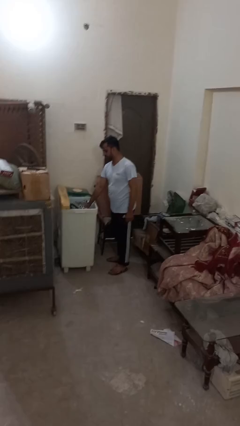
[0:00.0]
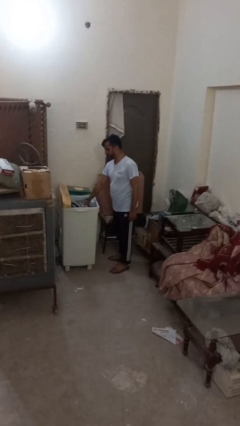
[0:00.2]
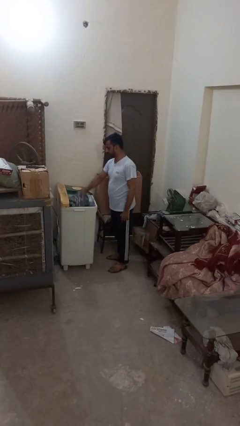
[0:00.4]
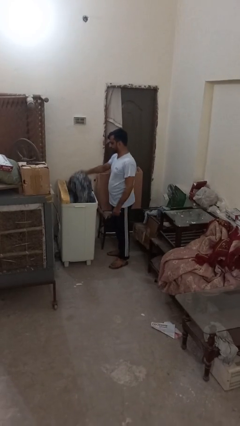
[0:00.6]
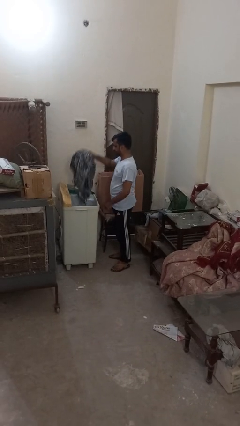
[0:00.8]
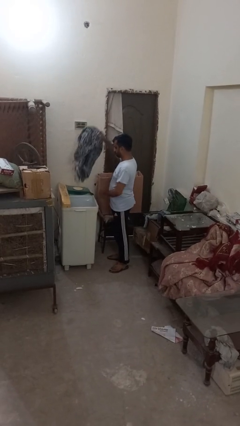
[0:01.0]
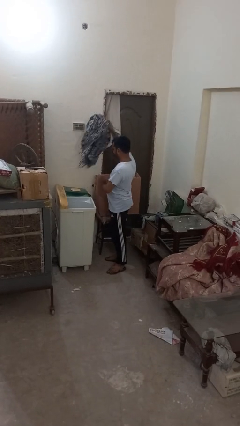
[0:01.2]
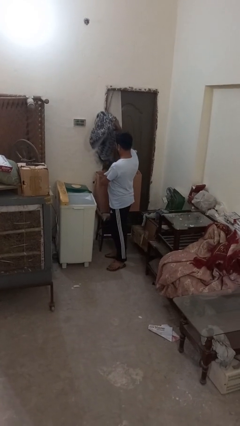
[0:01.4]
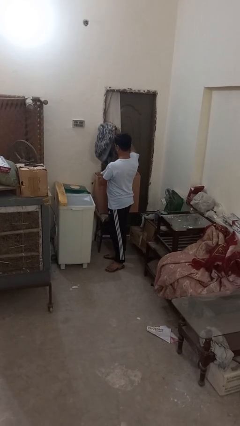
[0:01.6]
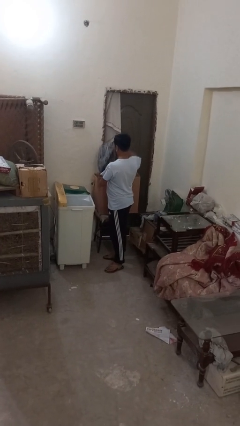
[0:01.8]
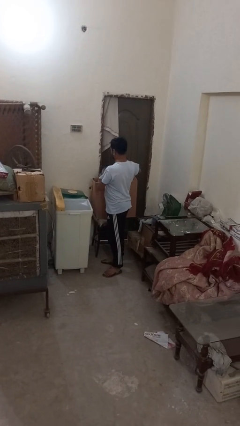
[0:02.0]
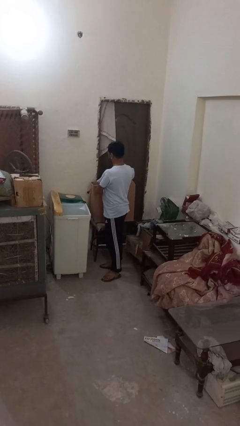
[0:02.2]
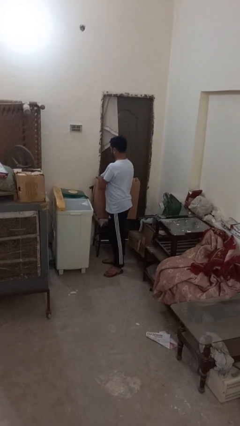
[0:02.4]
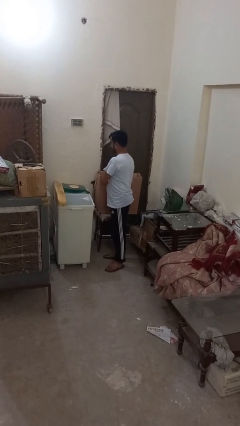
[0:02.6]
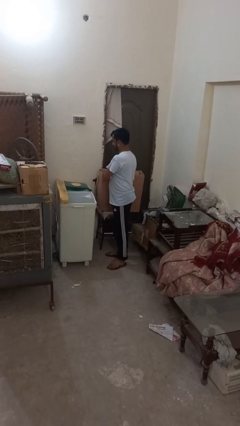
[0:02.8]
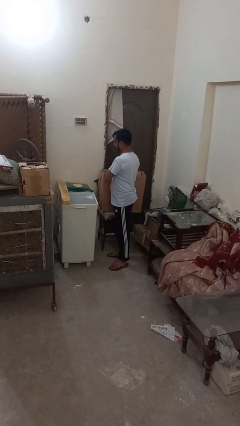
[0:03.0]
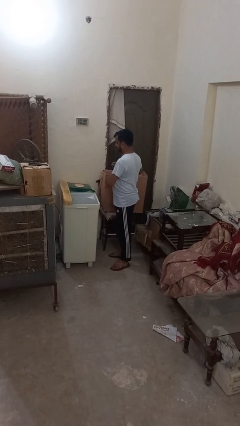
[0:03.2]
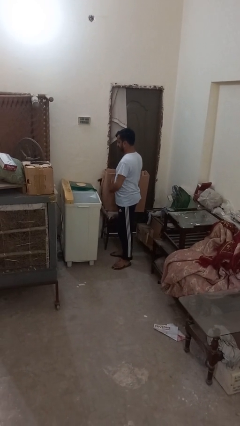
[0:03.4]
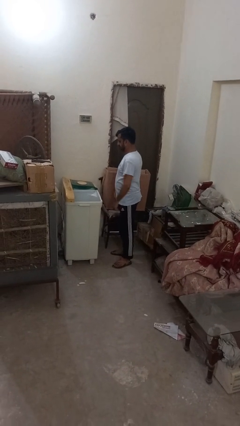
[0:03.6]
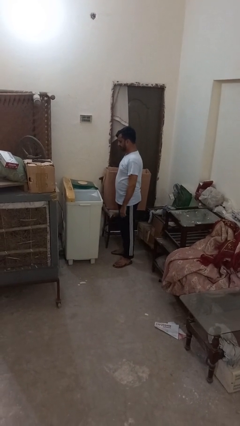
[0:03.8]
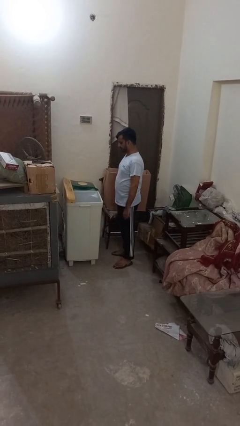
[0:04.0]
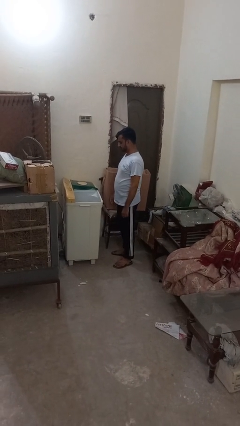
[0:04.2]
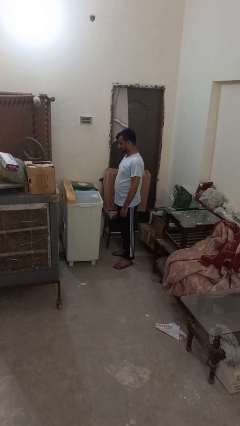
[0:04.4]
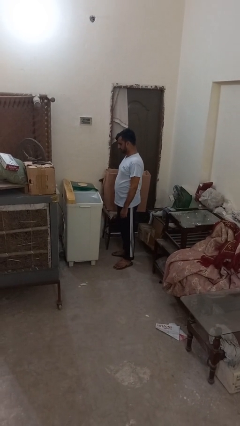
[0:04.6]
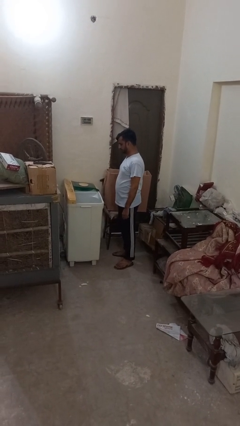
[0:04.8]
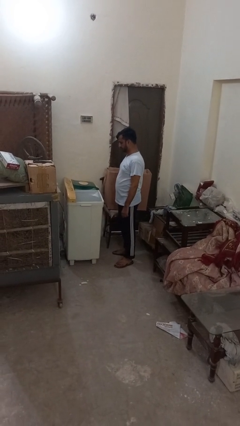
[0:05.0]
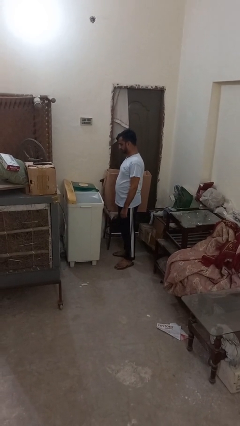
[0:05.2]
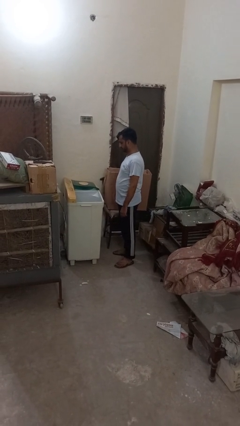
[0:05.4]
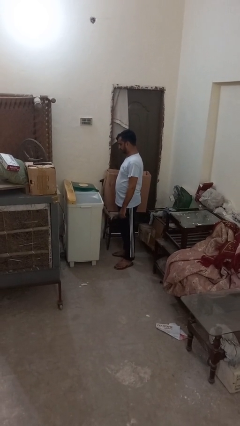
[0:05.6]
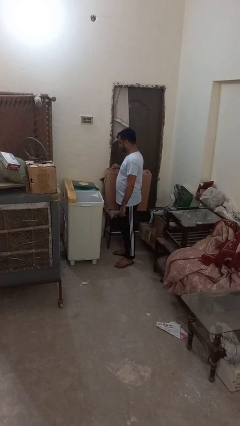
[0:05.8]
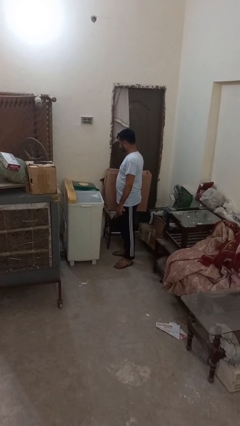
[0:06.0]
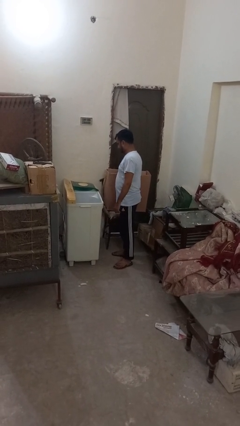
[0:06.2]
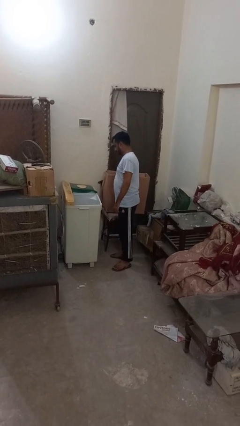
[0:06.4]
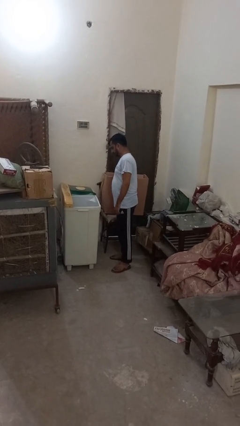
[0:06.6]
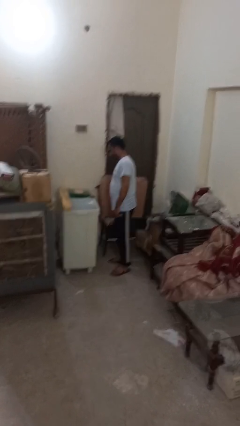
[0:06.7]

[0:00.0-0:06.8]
person unloads dryer

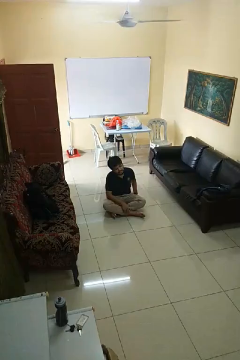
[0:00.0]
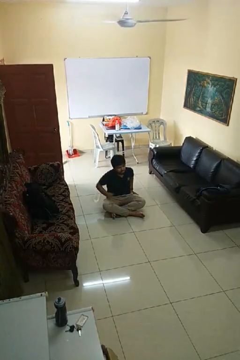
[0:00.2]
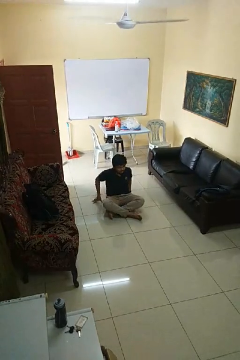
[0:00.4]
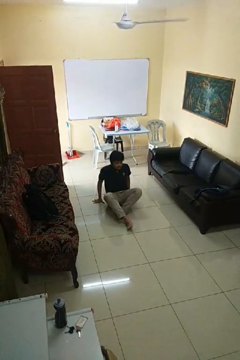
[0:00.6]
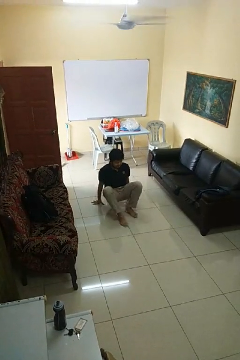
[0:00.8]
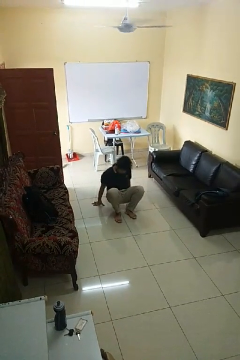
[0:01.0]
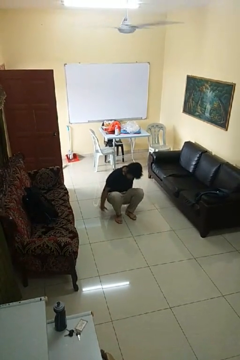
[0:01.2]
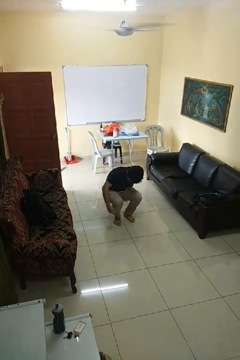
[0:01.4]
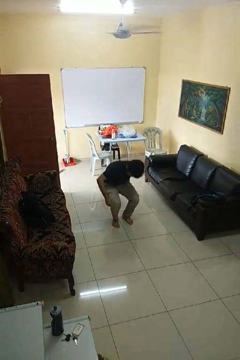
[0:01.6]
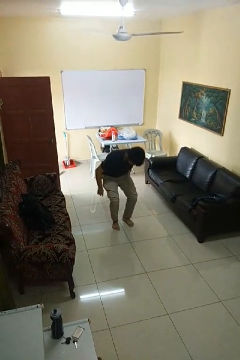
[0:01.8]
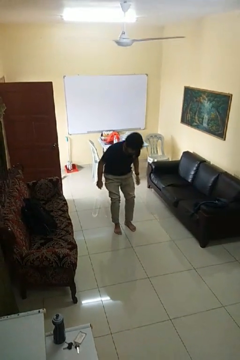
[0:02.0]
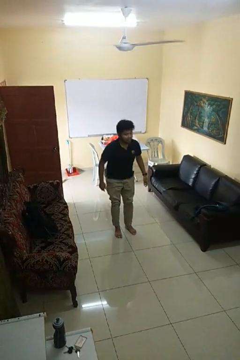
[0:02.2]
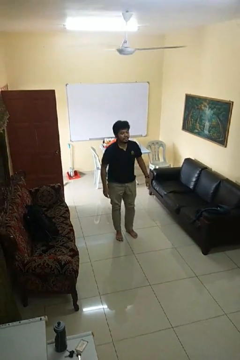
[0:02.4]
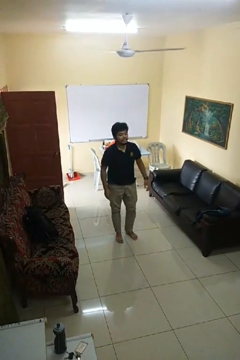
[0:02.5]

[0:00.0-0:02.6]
person stands up from floor

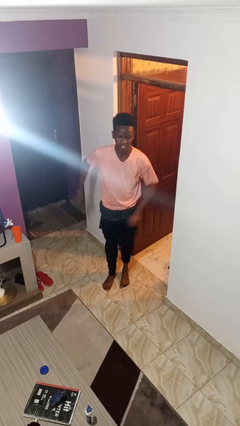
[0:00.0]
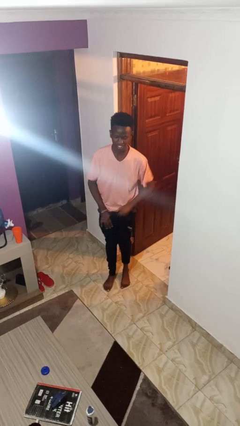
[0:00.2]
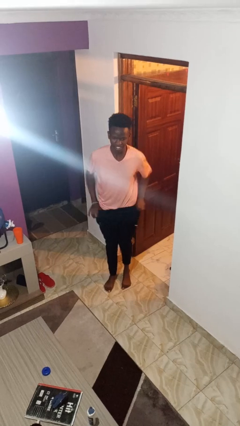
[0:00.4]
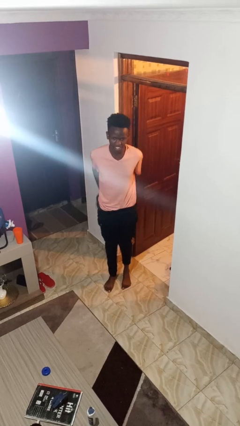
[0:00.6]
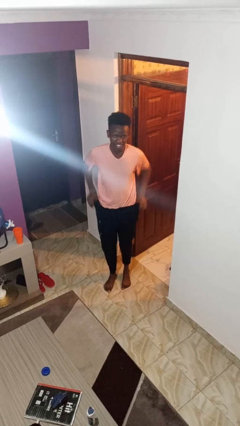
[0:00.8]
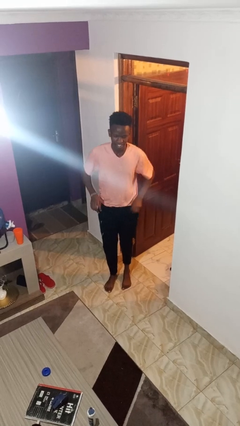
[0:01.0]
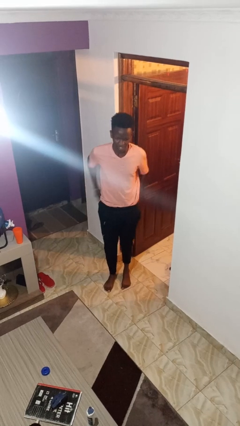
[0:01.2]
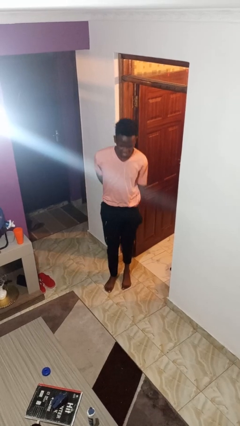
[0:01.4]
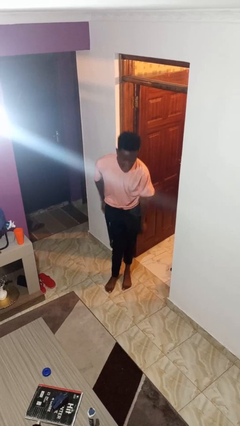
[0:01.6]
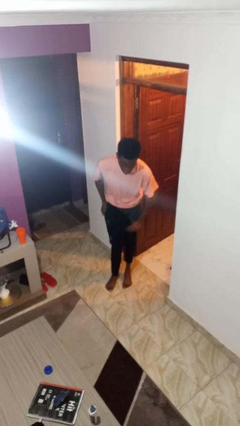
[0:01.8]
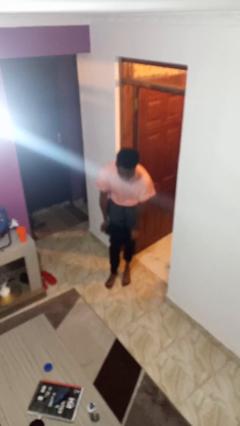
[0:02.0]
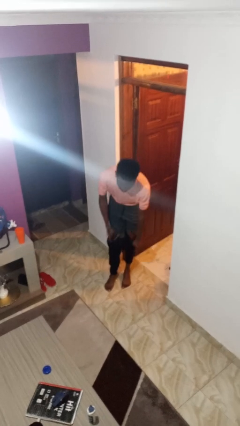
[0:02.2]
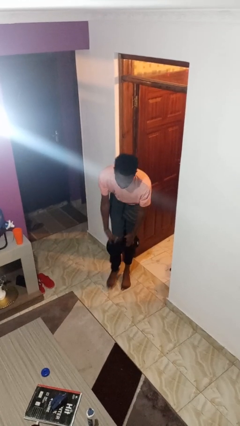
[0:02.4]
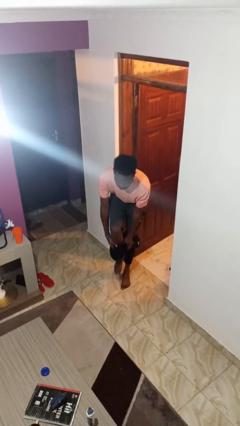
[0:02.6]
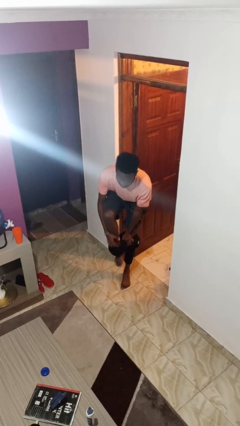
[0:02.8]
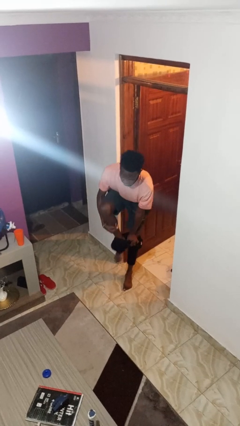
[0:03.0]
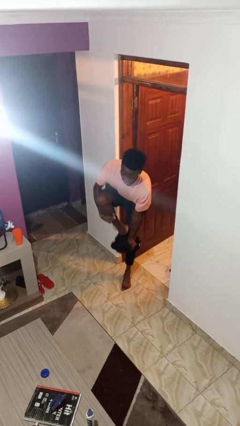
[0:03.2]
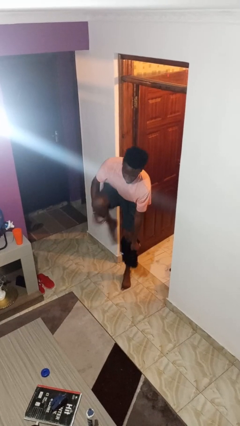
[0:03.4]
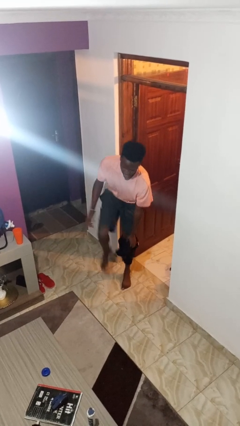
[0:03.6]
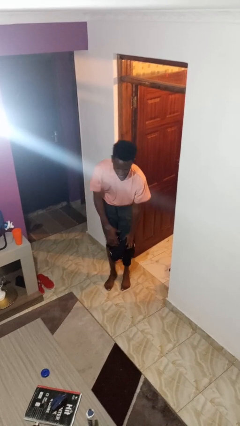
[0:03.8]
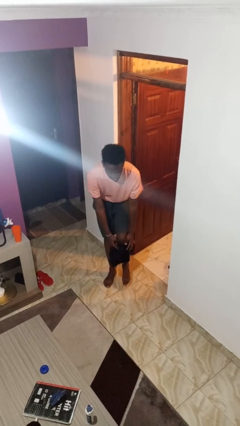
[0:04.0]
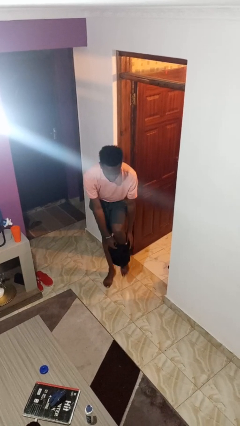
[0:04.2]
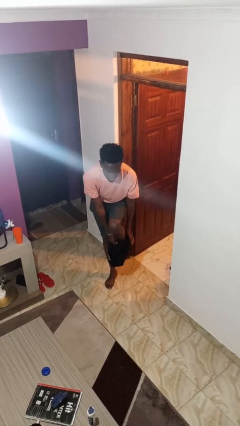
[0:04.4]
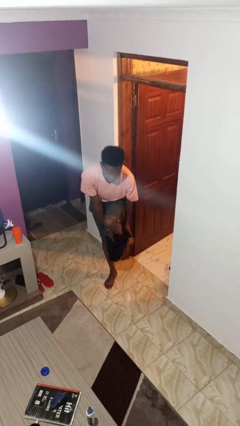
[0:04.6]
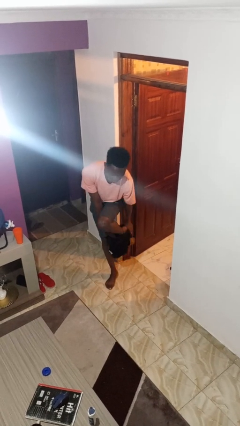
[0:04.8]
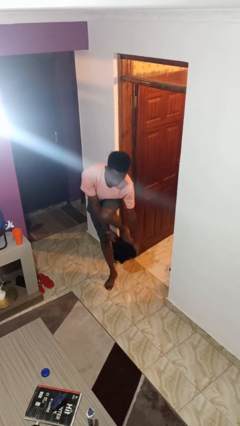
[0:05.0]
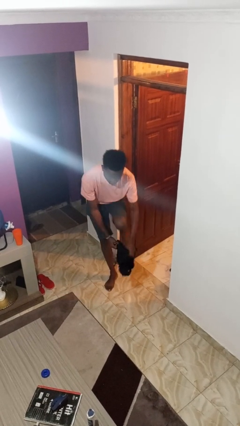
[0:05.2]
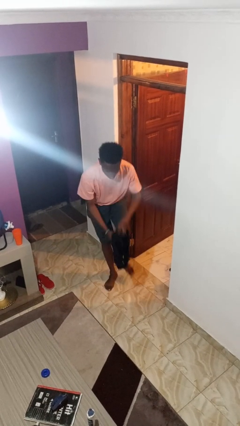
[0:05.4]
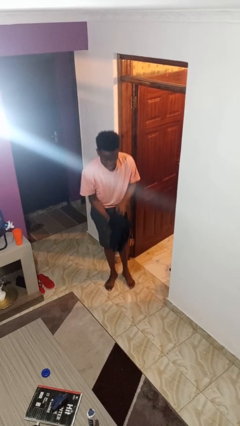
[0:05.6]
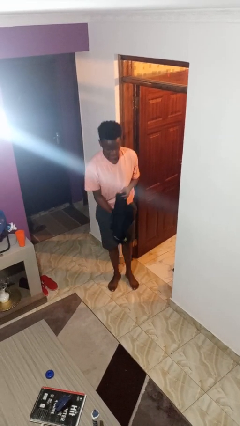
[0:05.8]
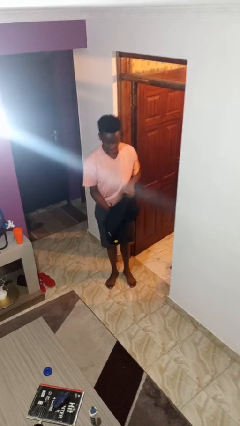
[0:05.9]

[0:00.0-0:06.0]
person takes off pants

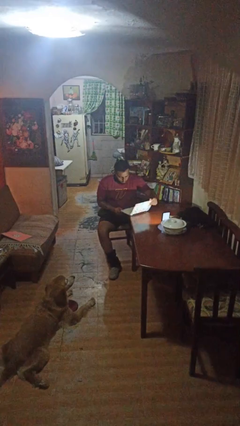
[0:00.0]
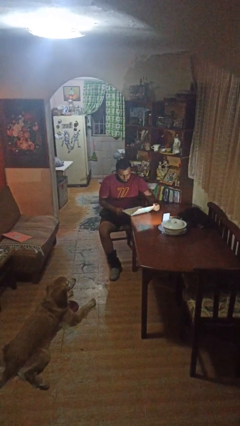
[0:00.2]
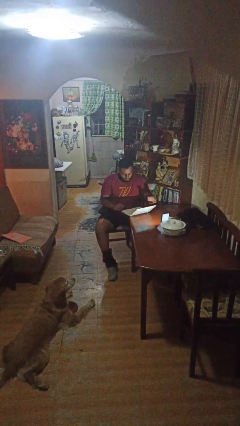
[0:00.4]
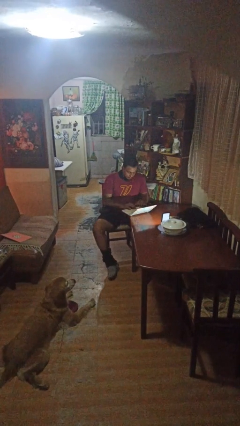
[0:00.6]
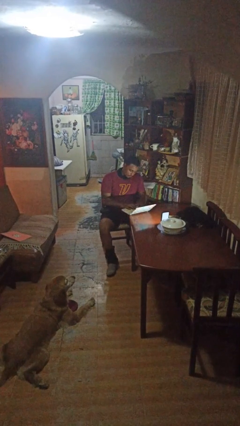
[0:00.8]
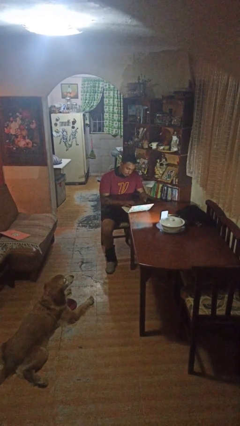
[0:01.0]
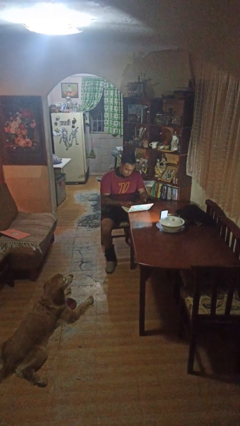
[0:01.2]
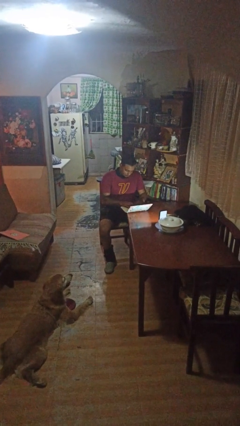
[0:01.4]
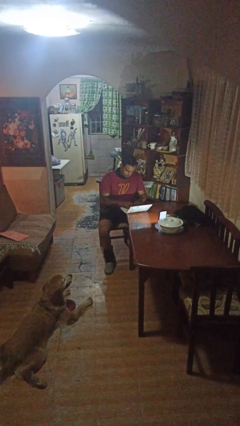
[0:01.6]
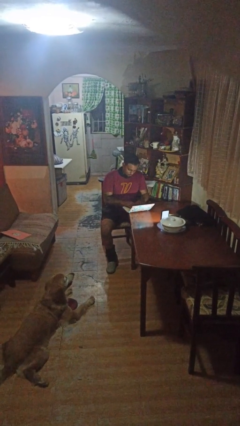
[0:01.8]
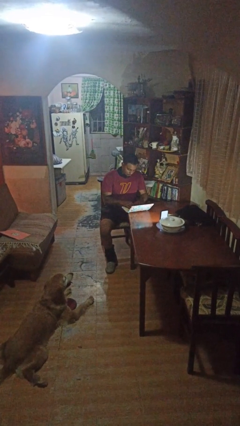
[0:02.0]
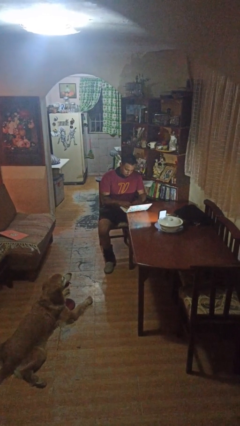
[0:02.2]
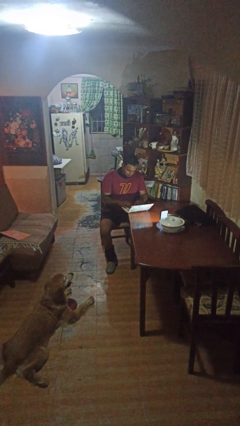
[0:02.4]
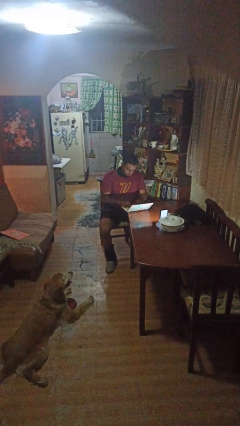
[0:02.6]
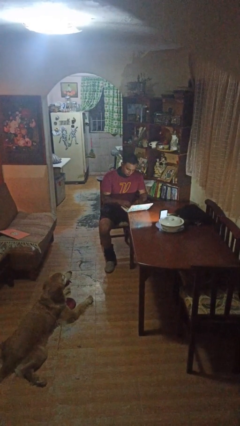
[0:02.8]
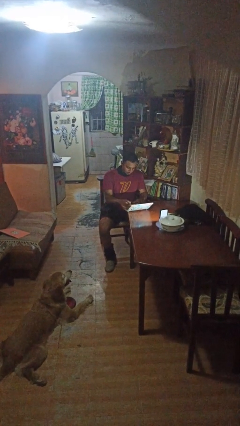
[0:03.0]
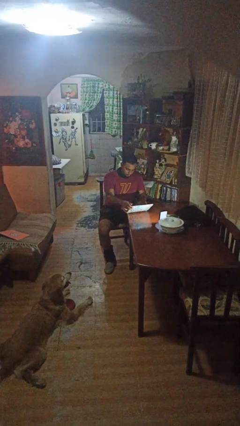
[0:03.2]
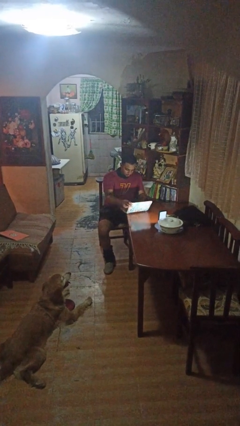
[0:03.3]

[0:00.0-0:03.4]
person interacts with laptop
